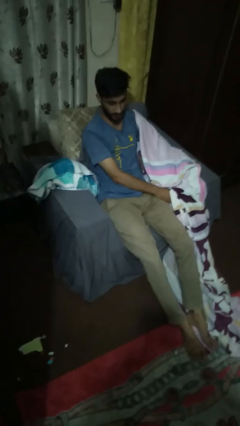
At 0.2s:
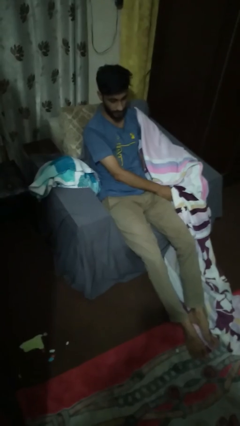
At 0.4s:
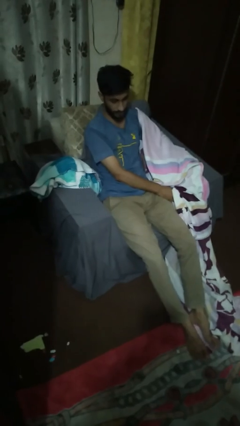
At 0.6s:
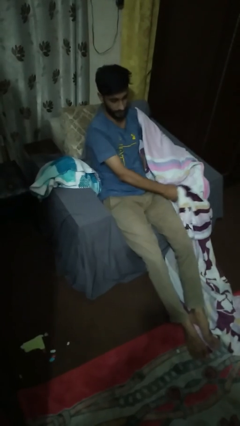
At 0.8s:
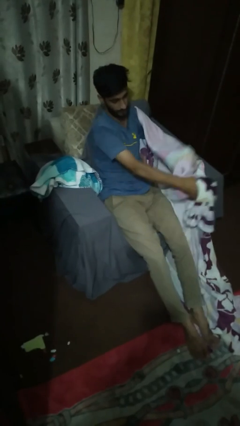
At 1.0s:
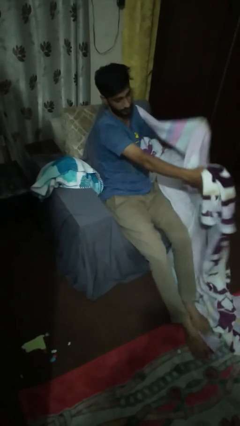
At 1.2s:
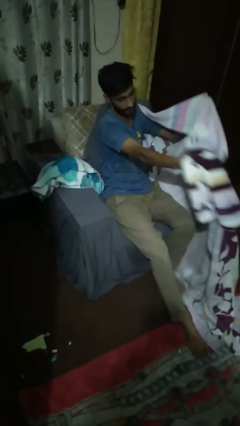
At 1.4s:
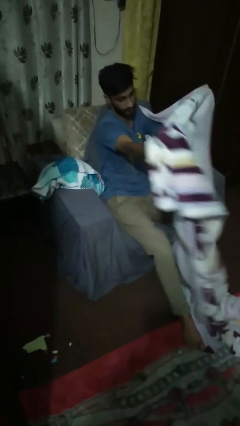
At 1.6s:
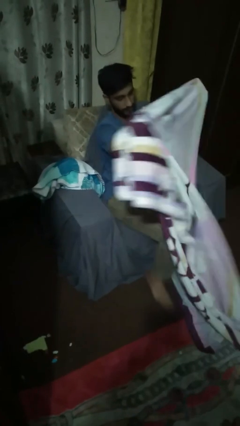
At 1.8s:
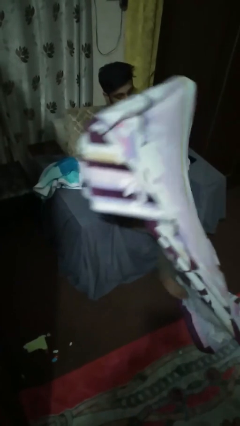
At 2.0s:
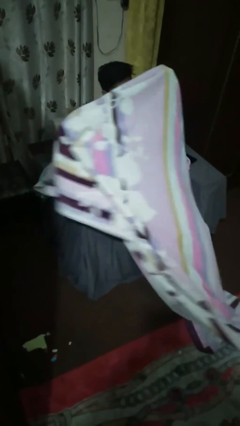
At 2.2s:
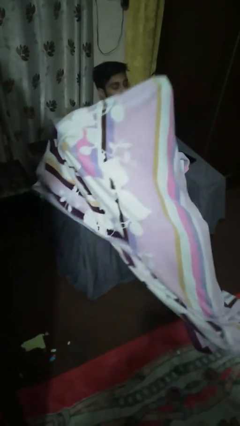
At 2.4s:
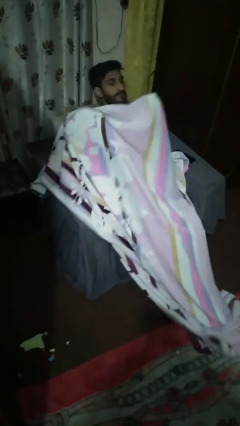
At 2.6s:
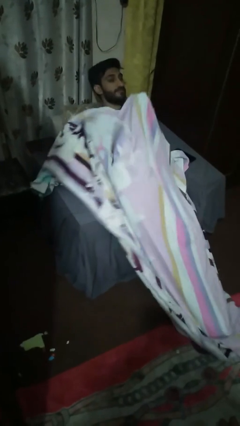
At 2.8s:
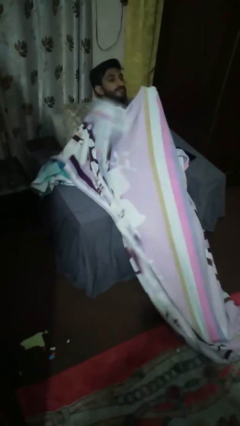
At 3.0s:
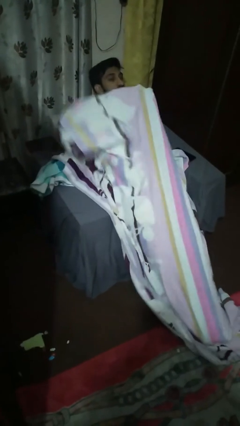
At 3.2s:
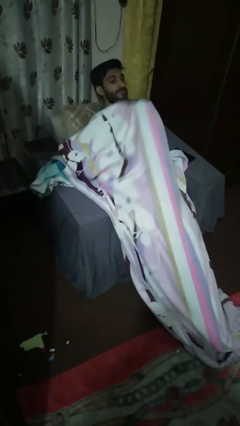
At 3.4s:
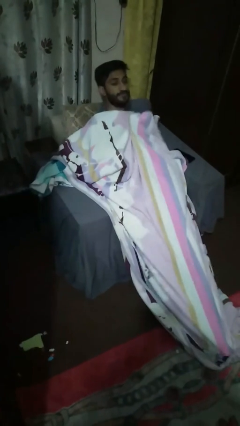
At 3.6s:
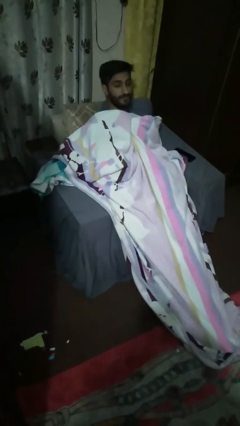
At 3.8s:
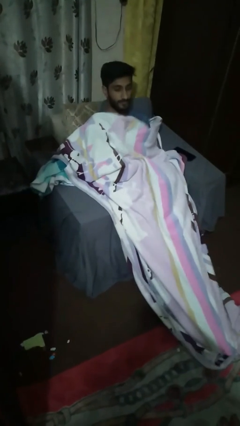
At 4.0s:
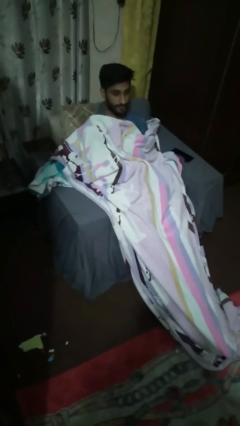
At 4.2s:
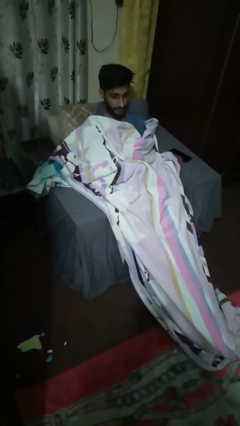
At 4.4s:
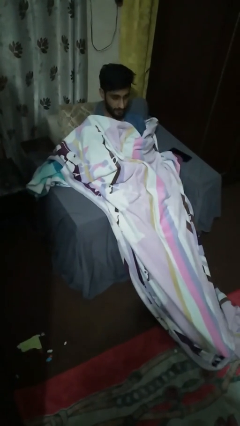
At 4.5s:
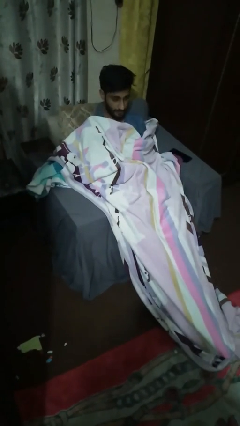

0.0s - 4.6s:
person covers with blanket

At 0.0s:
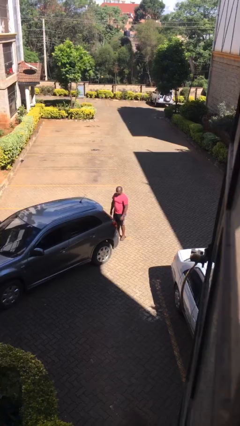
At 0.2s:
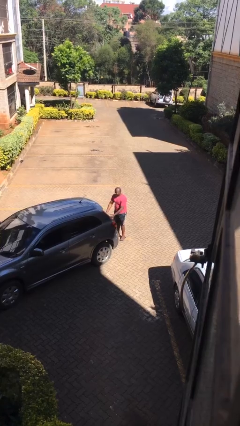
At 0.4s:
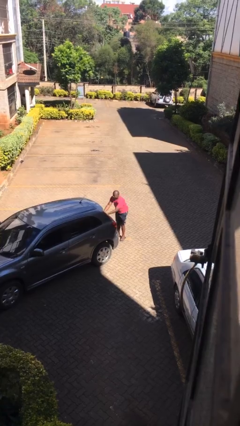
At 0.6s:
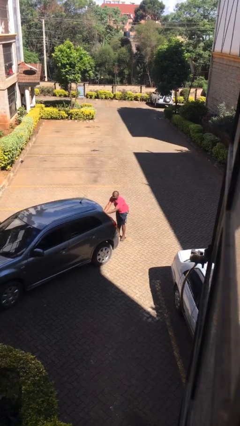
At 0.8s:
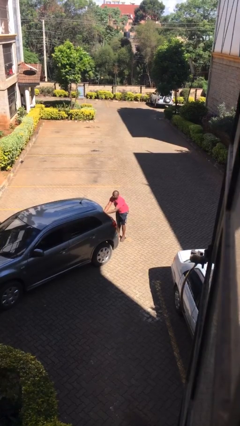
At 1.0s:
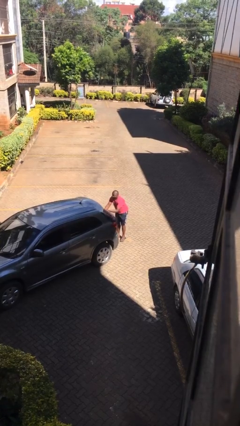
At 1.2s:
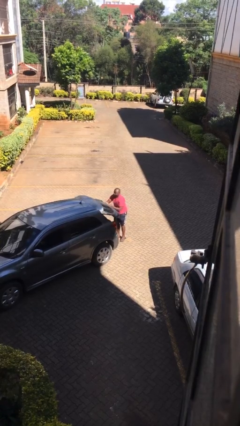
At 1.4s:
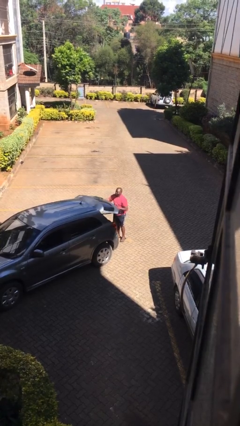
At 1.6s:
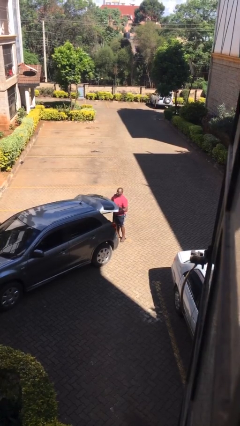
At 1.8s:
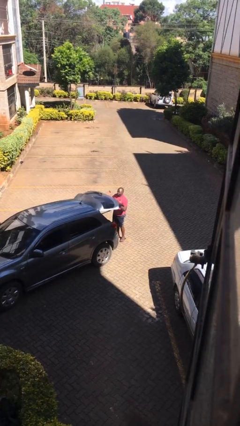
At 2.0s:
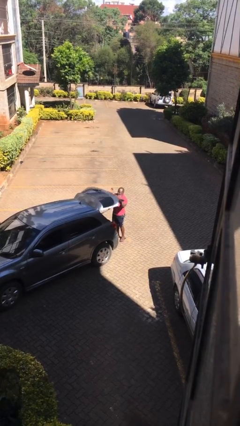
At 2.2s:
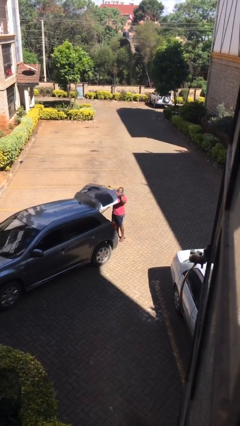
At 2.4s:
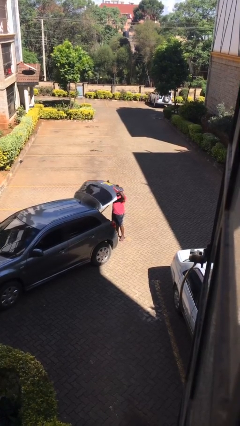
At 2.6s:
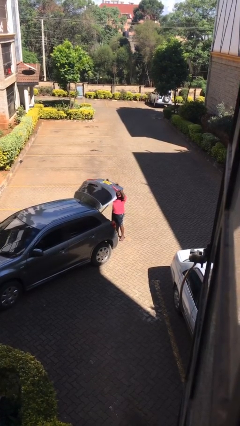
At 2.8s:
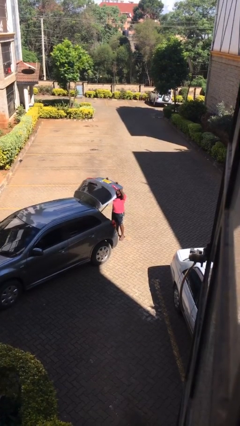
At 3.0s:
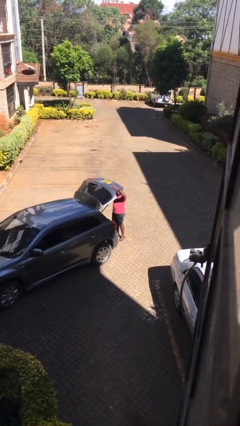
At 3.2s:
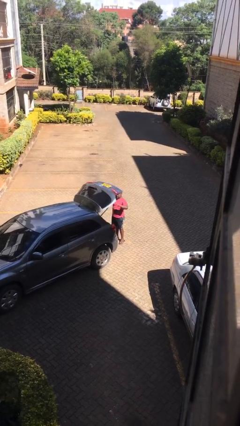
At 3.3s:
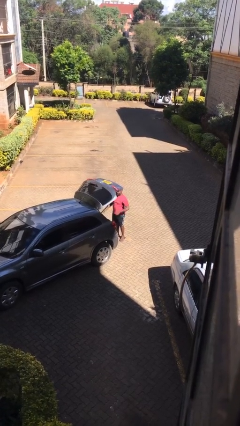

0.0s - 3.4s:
person opens car trunk

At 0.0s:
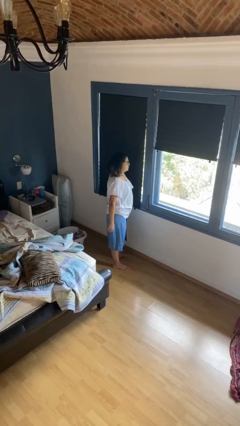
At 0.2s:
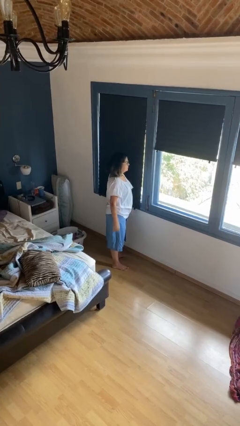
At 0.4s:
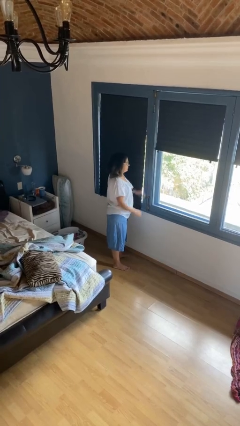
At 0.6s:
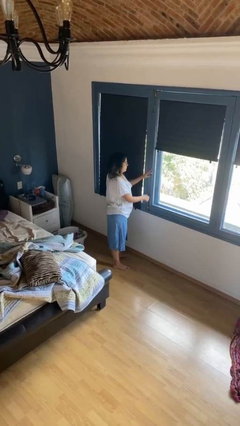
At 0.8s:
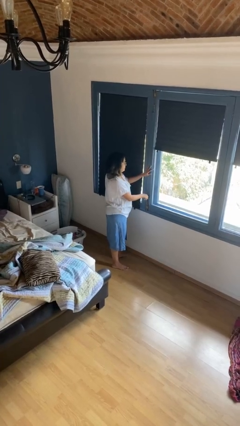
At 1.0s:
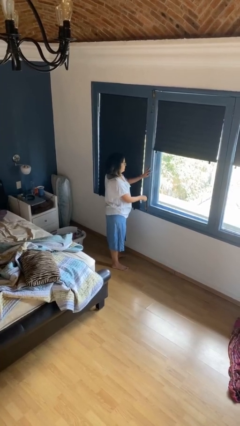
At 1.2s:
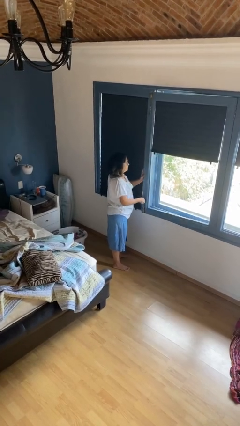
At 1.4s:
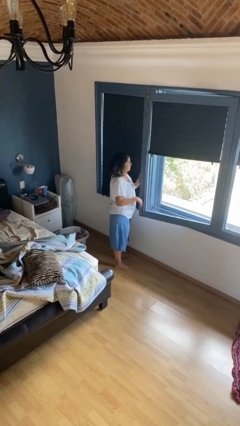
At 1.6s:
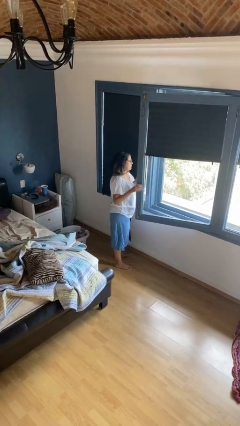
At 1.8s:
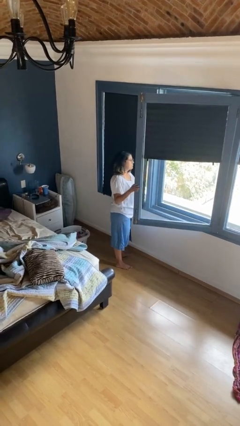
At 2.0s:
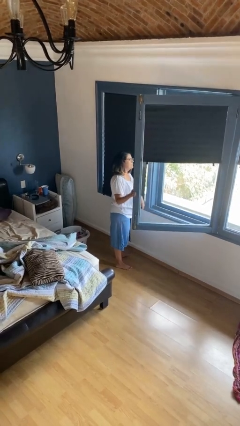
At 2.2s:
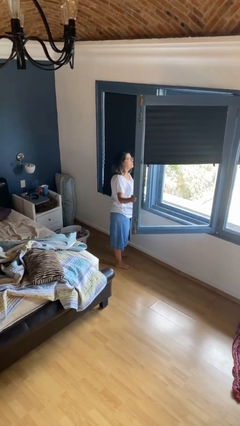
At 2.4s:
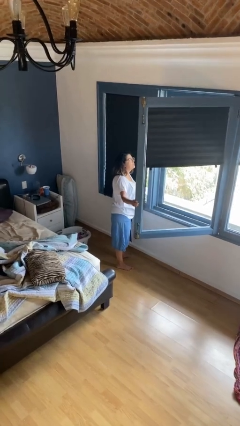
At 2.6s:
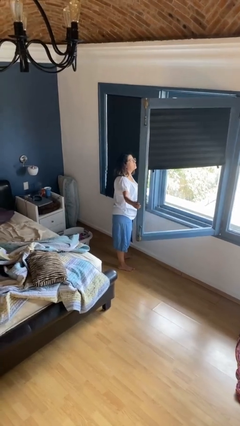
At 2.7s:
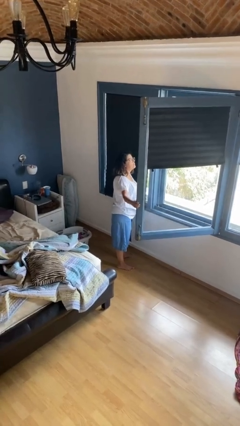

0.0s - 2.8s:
person opens home window

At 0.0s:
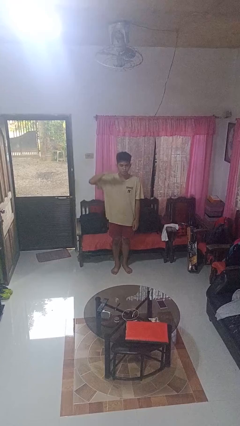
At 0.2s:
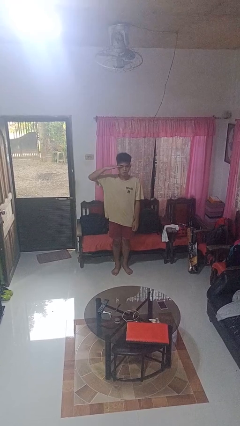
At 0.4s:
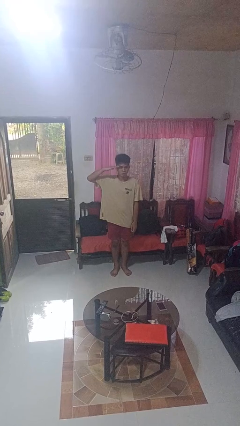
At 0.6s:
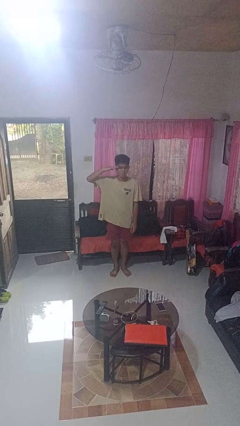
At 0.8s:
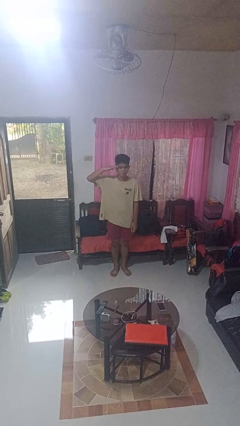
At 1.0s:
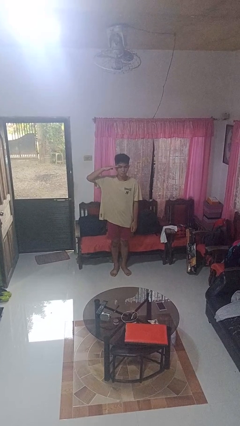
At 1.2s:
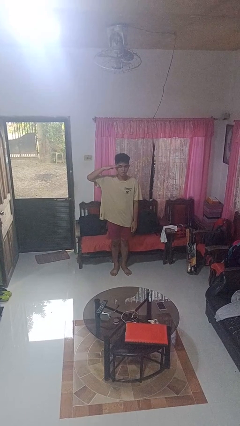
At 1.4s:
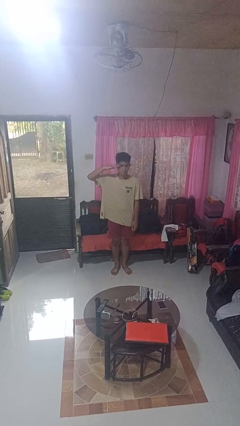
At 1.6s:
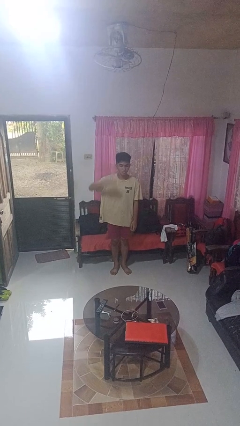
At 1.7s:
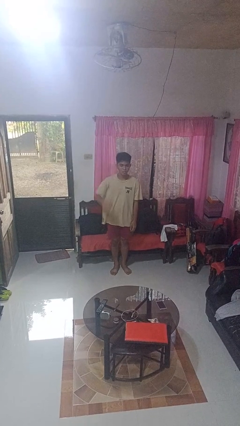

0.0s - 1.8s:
person salutes

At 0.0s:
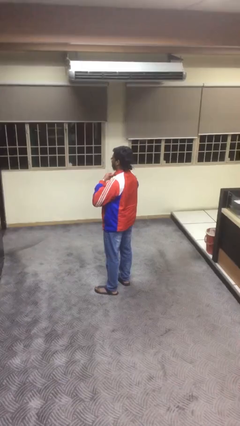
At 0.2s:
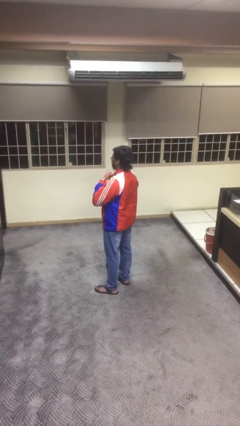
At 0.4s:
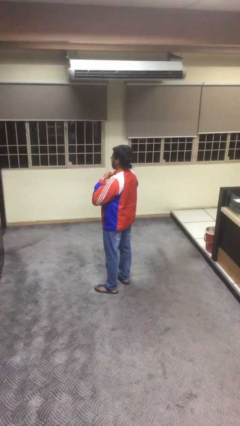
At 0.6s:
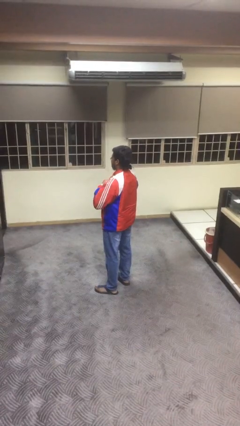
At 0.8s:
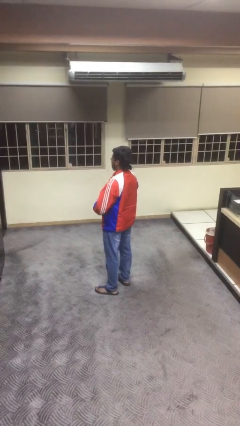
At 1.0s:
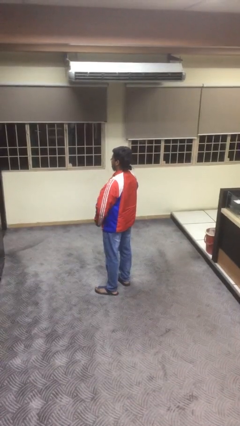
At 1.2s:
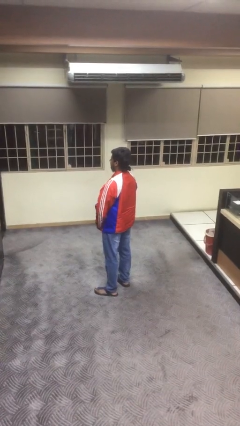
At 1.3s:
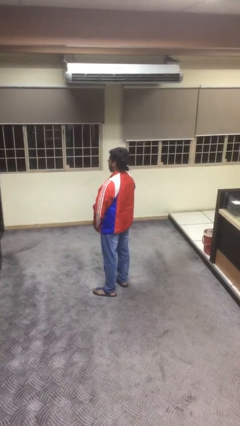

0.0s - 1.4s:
person unzips jacket

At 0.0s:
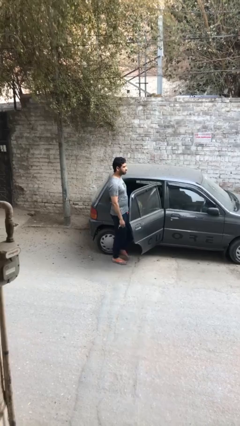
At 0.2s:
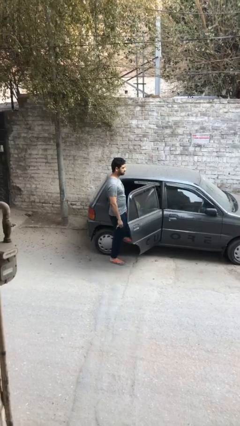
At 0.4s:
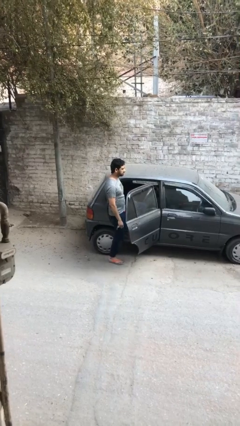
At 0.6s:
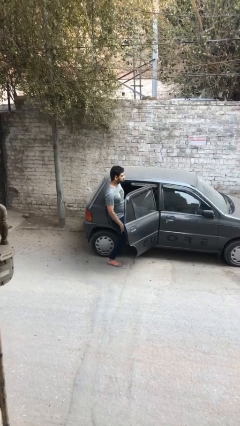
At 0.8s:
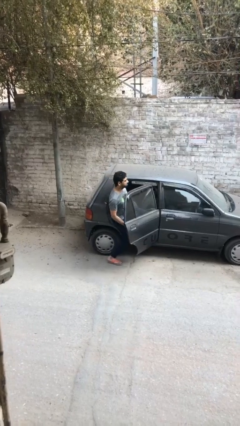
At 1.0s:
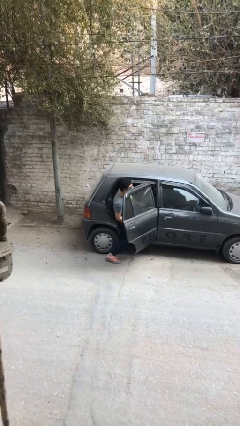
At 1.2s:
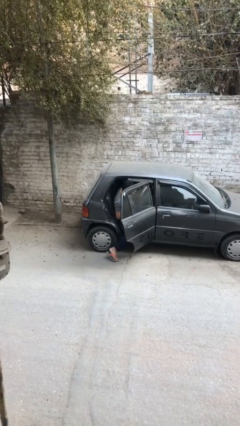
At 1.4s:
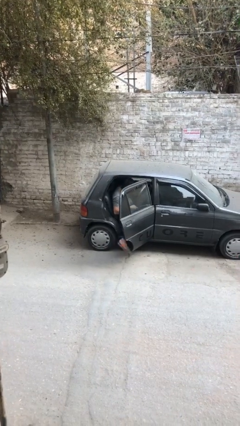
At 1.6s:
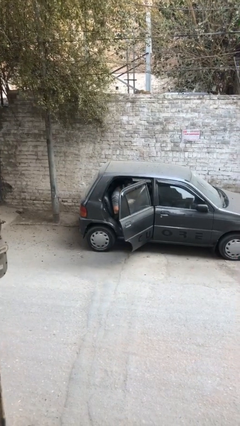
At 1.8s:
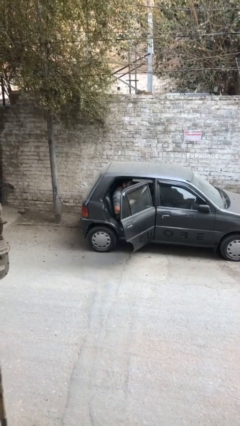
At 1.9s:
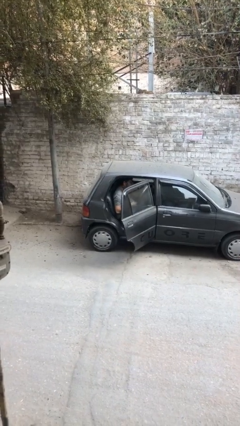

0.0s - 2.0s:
person enters car

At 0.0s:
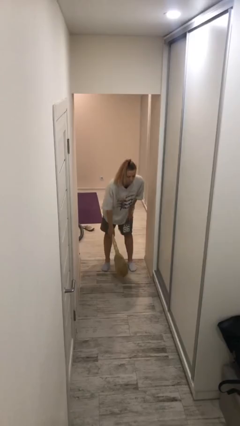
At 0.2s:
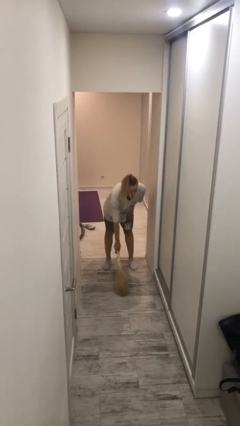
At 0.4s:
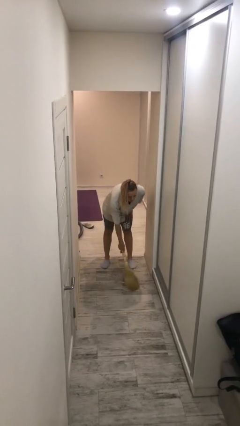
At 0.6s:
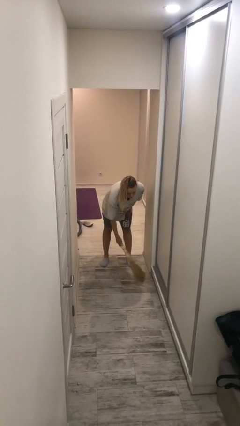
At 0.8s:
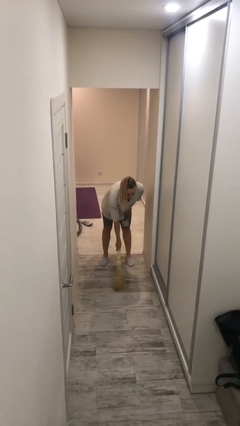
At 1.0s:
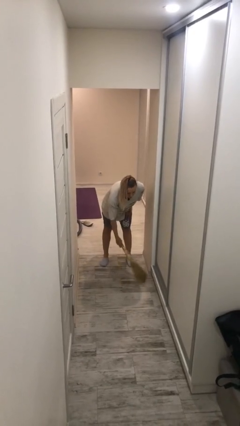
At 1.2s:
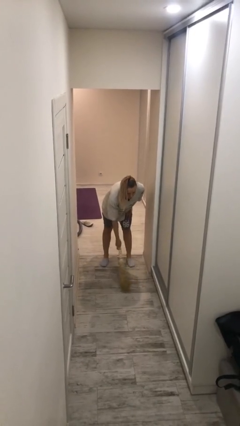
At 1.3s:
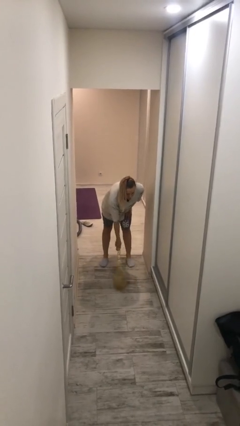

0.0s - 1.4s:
person sweeps floor

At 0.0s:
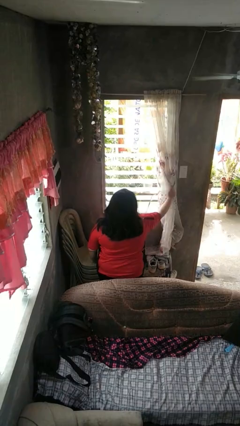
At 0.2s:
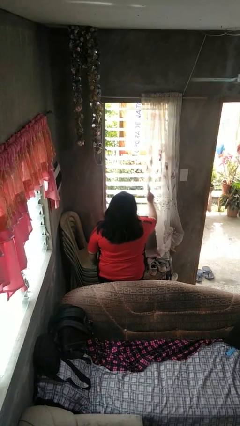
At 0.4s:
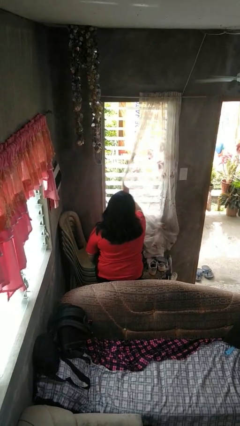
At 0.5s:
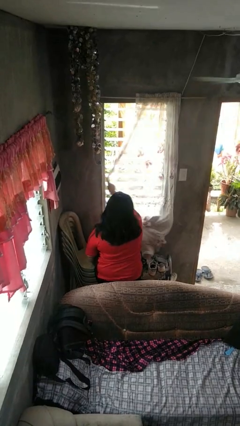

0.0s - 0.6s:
person closes curtains
